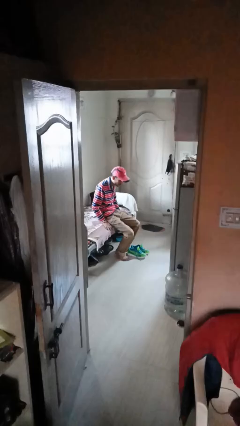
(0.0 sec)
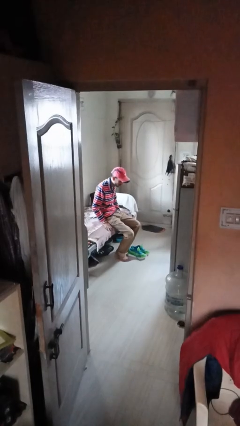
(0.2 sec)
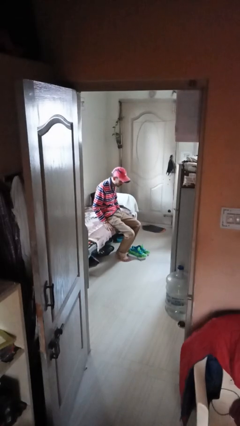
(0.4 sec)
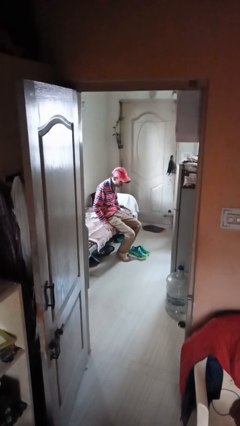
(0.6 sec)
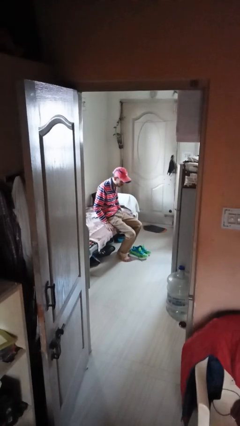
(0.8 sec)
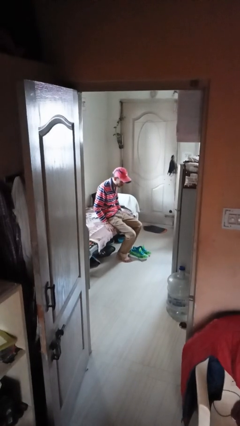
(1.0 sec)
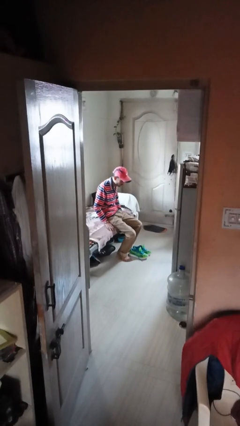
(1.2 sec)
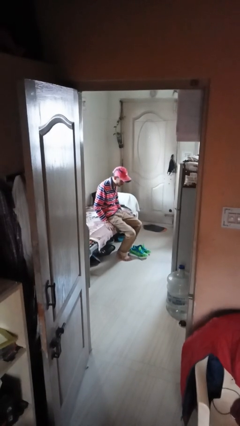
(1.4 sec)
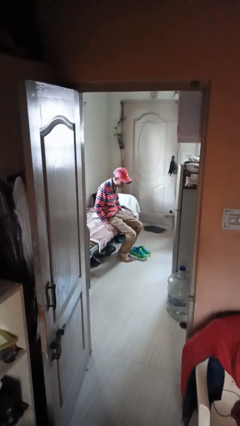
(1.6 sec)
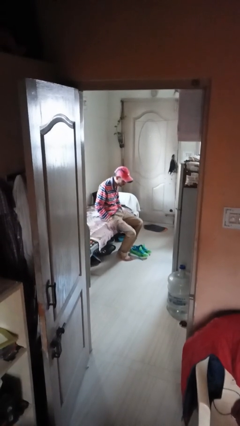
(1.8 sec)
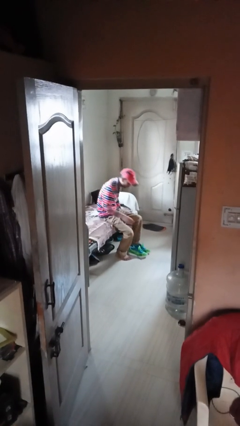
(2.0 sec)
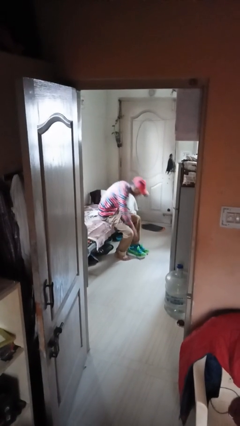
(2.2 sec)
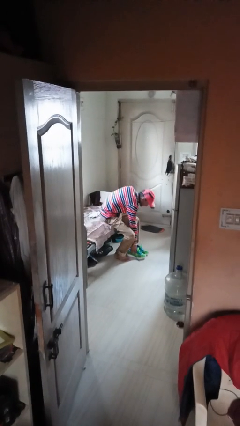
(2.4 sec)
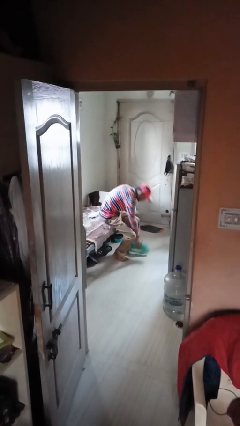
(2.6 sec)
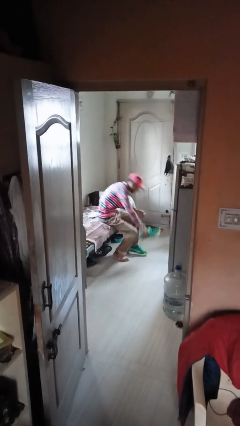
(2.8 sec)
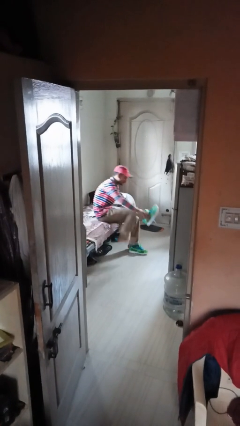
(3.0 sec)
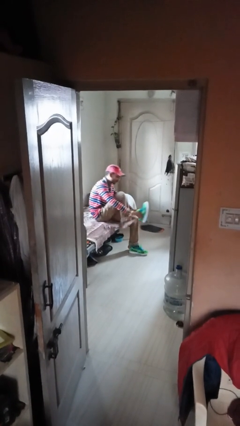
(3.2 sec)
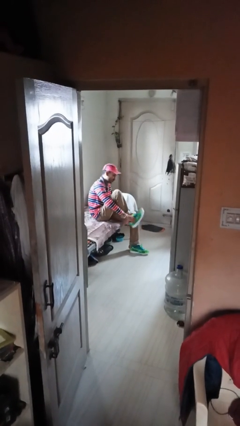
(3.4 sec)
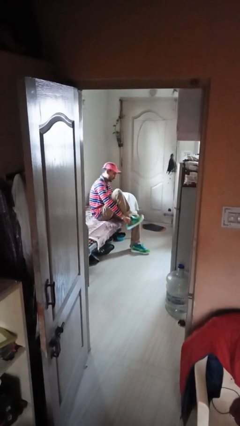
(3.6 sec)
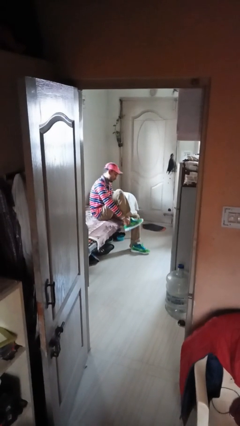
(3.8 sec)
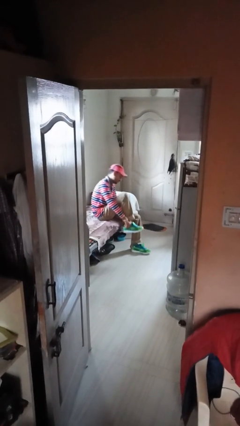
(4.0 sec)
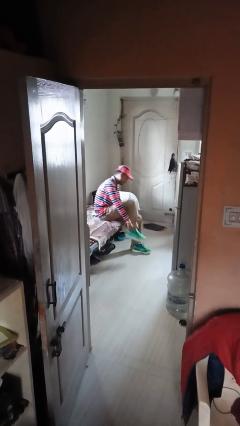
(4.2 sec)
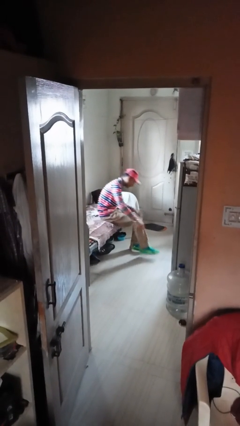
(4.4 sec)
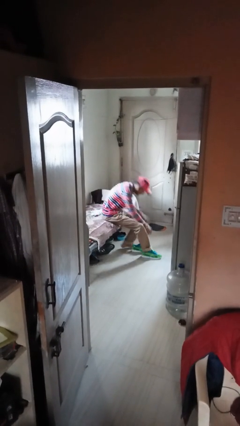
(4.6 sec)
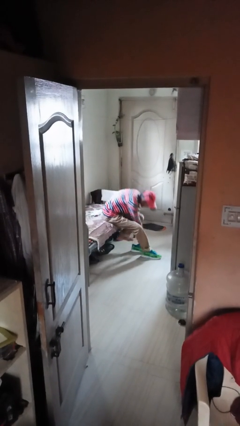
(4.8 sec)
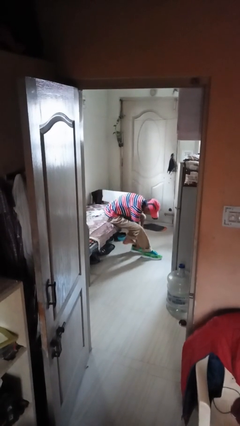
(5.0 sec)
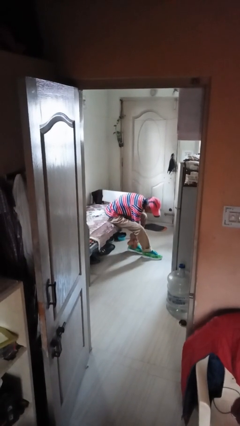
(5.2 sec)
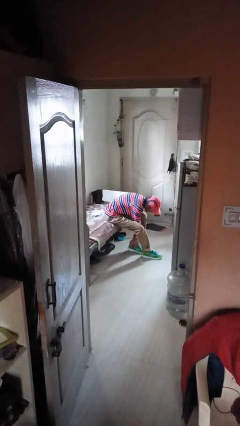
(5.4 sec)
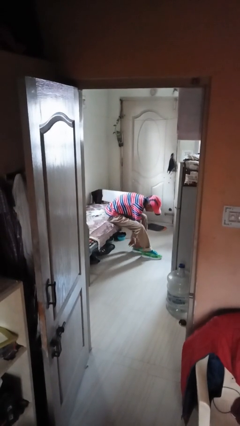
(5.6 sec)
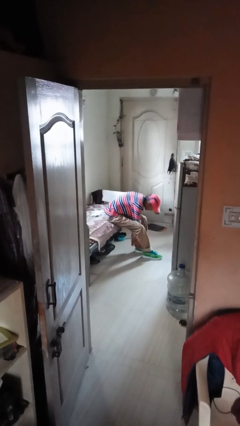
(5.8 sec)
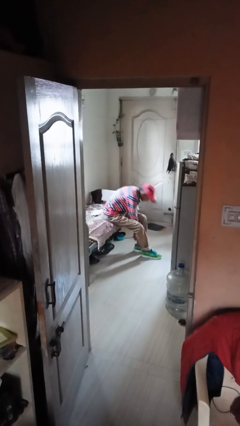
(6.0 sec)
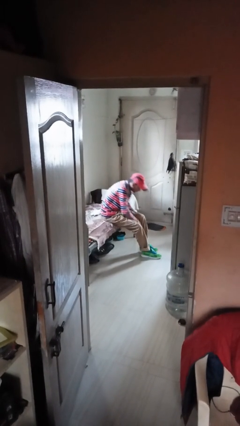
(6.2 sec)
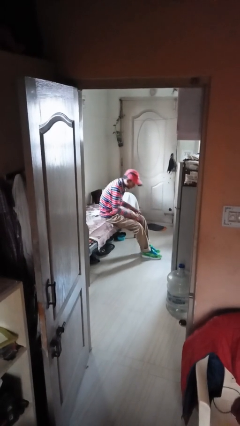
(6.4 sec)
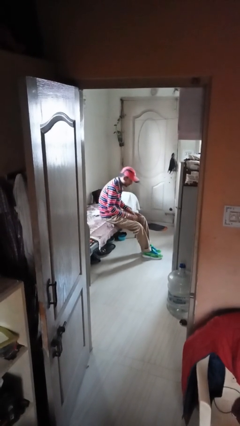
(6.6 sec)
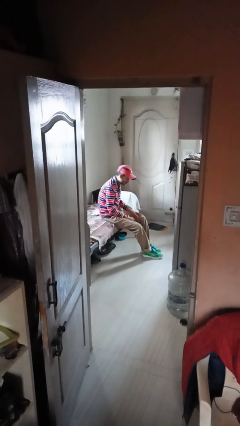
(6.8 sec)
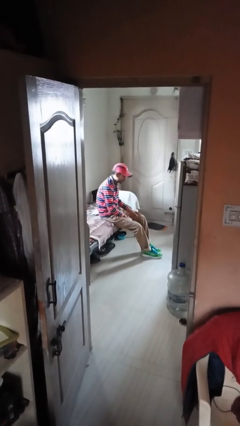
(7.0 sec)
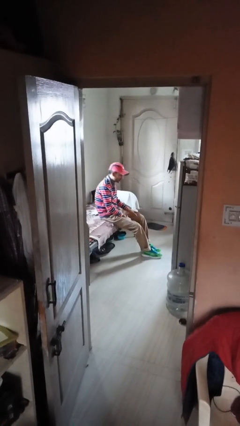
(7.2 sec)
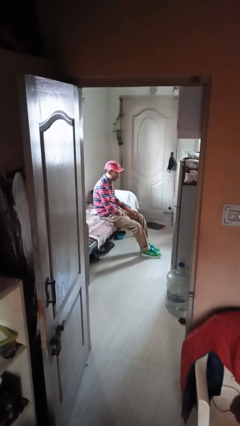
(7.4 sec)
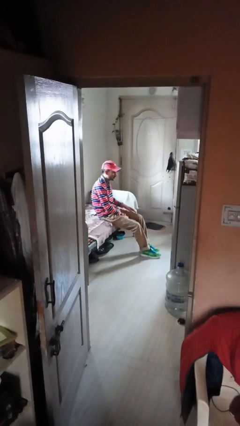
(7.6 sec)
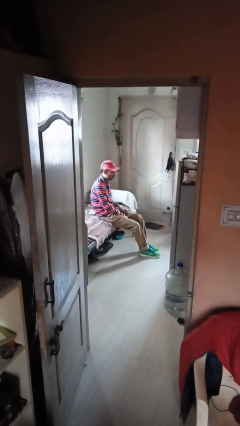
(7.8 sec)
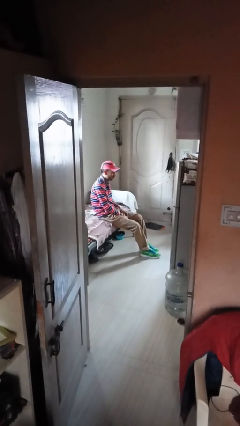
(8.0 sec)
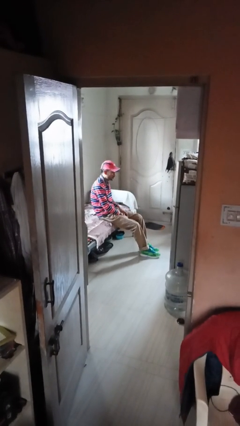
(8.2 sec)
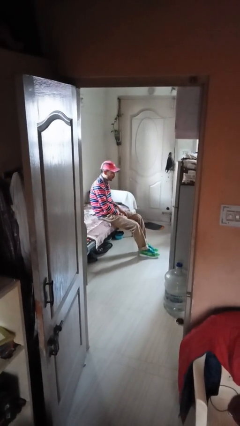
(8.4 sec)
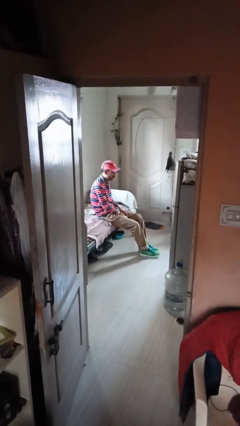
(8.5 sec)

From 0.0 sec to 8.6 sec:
person puts on shoes

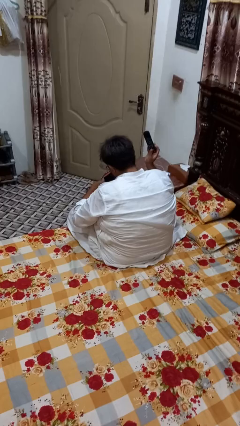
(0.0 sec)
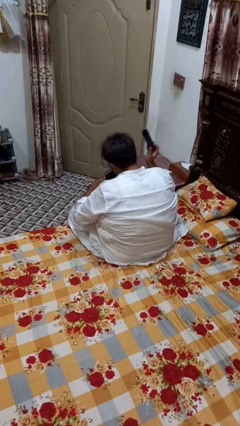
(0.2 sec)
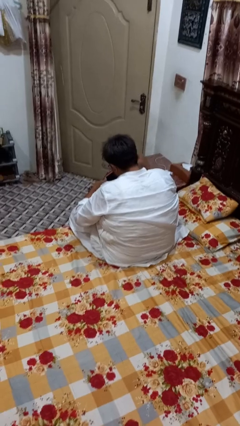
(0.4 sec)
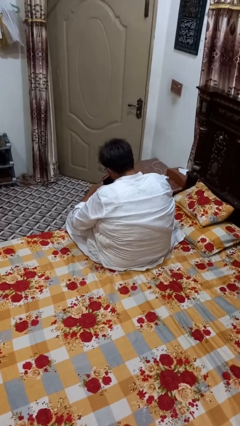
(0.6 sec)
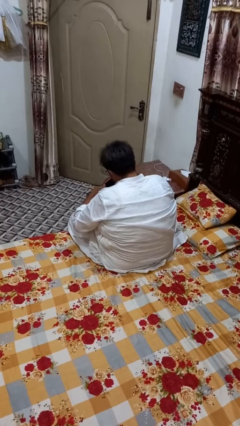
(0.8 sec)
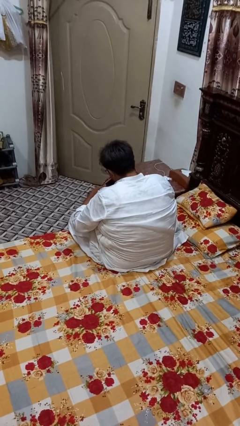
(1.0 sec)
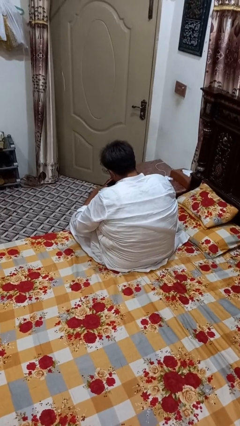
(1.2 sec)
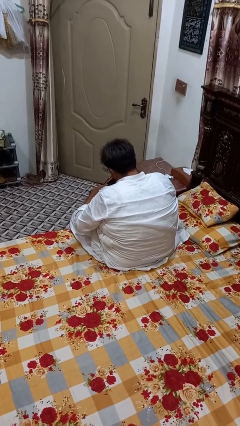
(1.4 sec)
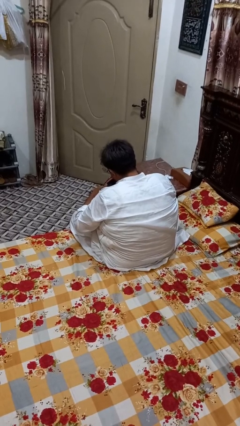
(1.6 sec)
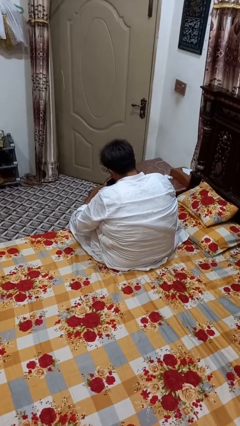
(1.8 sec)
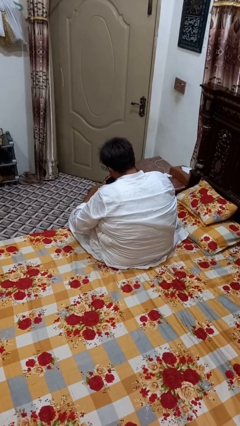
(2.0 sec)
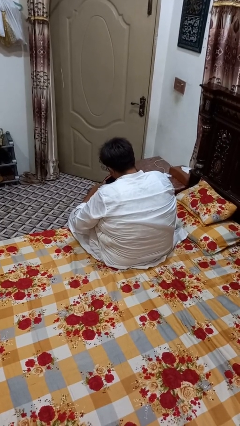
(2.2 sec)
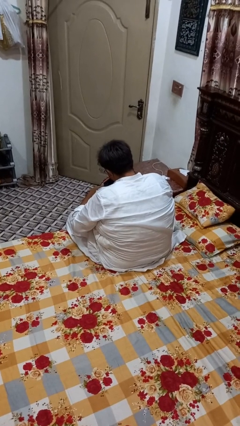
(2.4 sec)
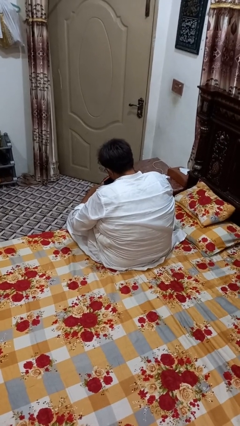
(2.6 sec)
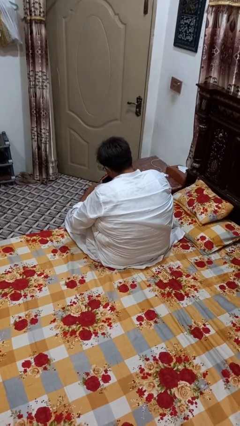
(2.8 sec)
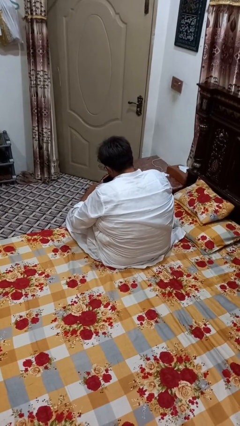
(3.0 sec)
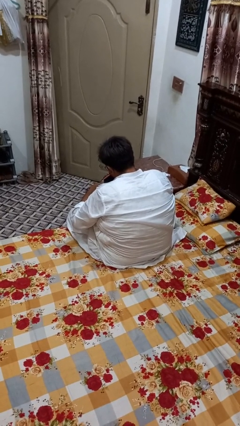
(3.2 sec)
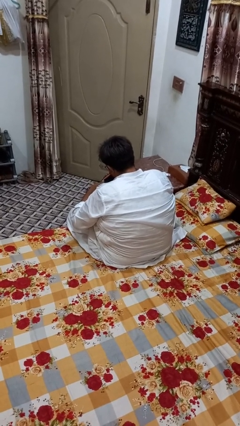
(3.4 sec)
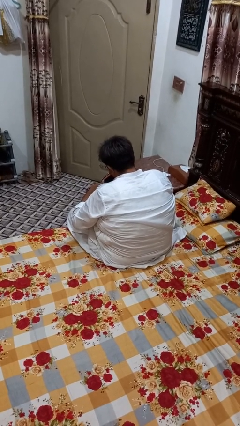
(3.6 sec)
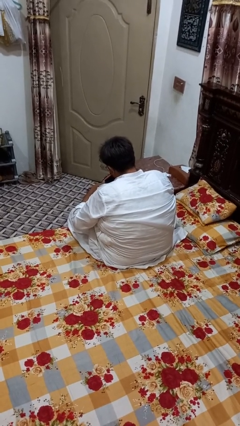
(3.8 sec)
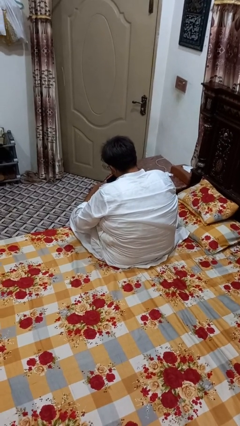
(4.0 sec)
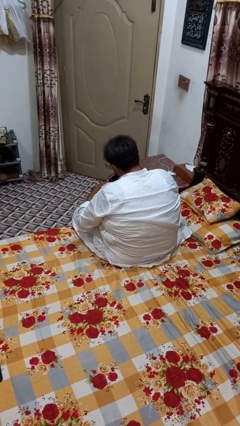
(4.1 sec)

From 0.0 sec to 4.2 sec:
person puts object into bag

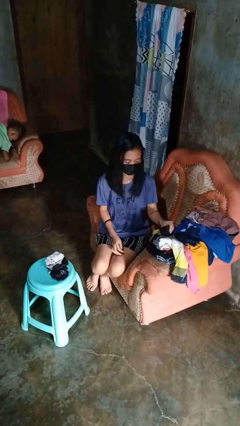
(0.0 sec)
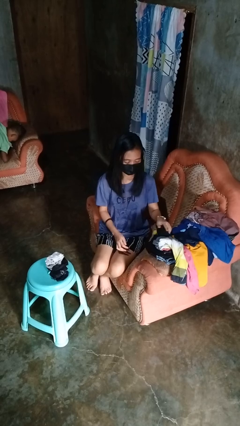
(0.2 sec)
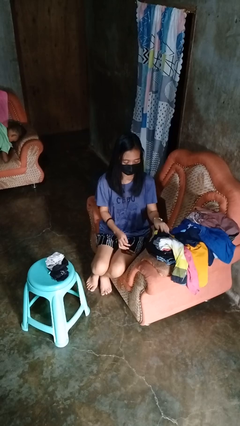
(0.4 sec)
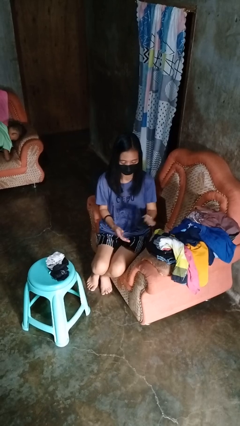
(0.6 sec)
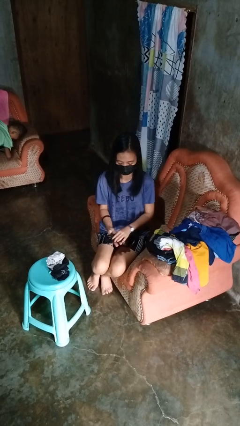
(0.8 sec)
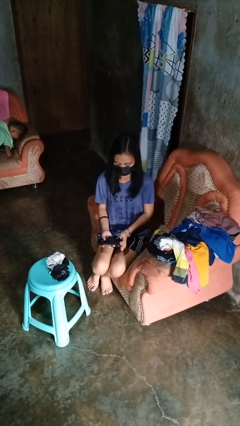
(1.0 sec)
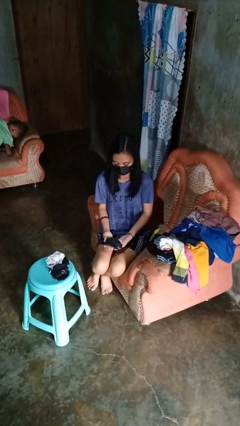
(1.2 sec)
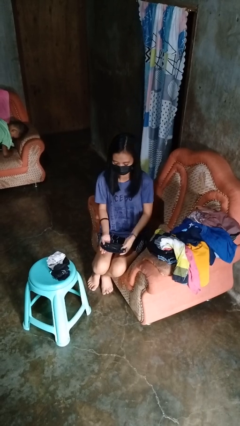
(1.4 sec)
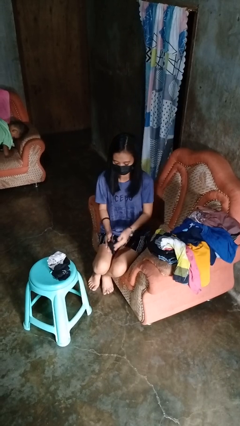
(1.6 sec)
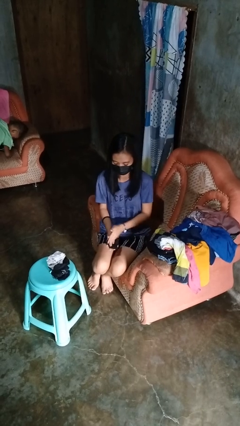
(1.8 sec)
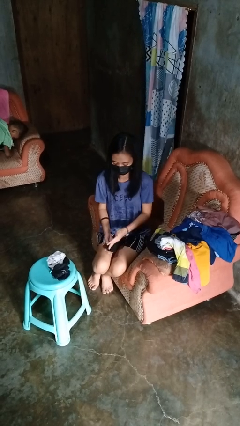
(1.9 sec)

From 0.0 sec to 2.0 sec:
person folds socks

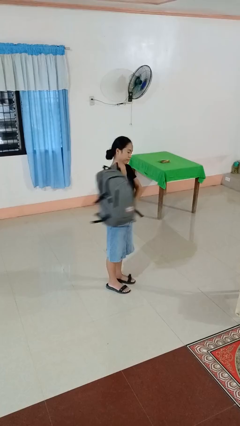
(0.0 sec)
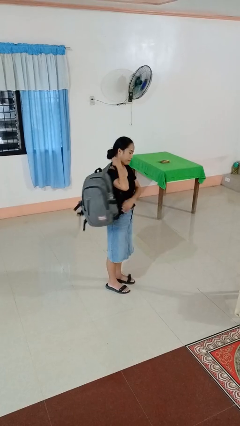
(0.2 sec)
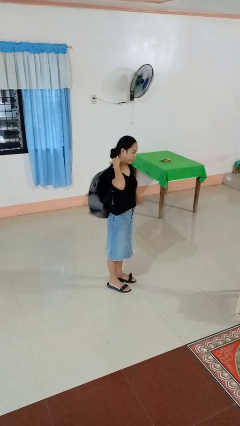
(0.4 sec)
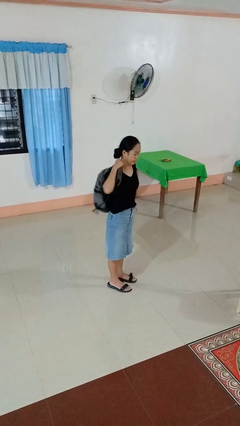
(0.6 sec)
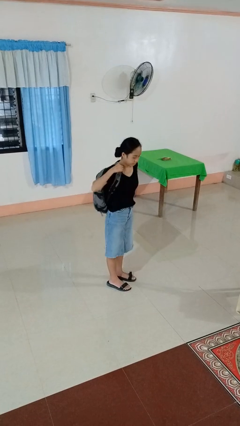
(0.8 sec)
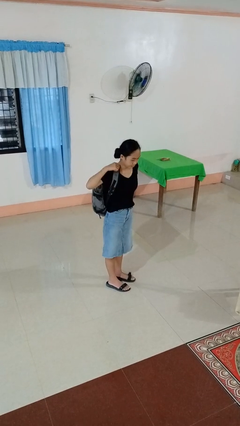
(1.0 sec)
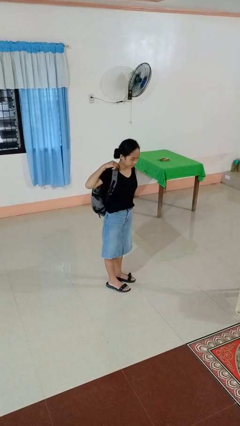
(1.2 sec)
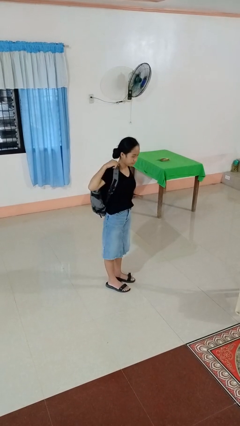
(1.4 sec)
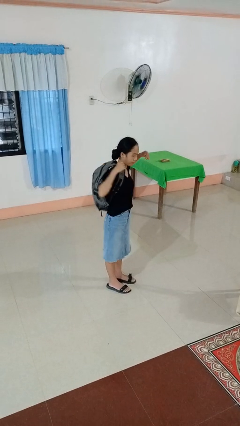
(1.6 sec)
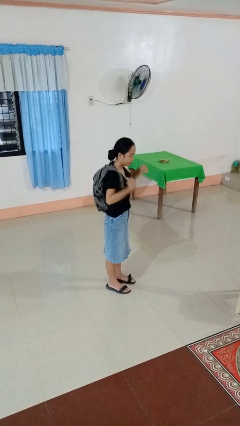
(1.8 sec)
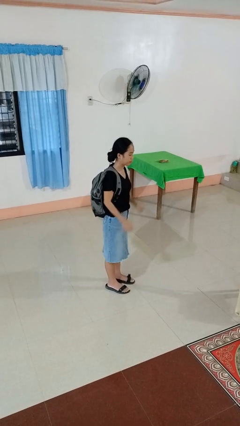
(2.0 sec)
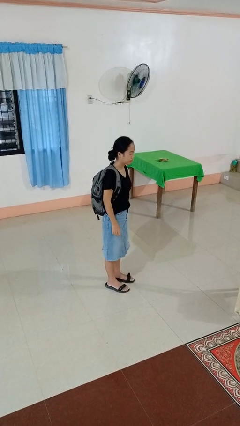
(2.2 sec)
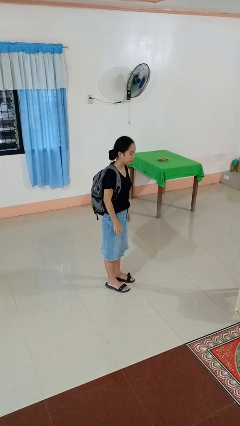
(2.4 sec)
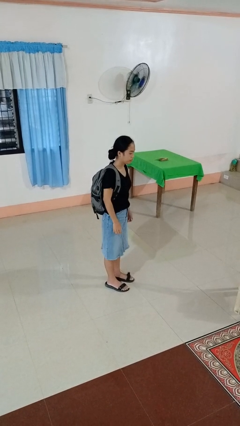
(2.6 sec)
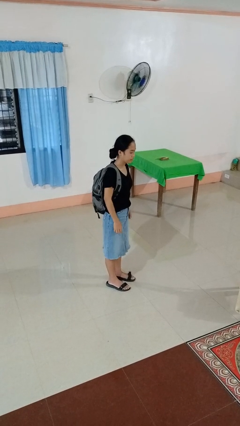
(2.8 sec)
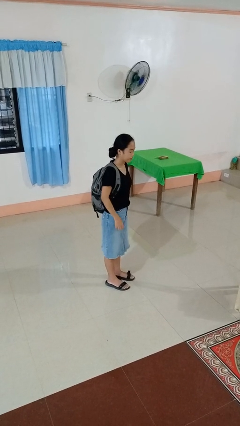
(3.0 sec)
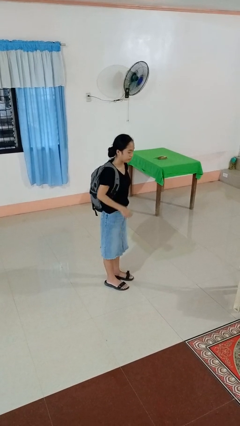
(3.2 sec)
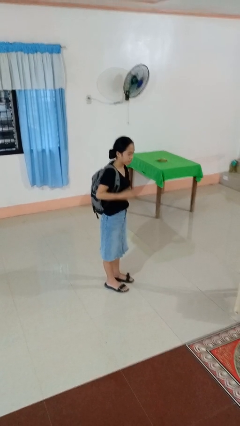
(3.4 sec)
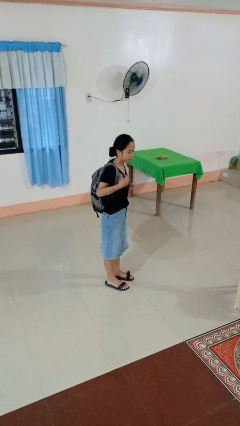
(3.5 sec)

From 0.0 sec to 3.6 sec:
person puts on backpack
